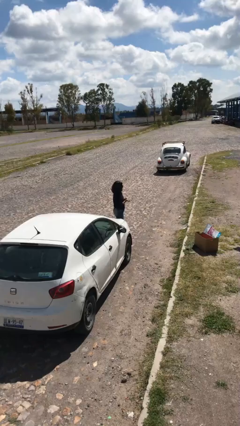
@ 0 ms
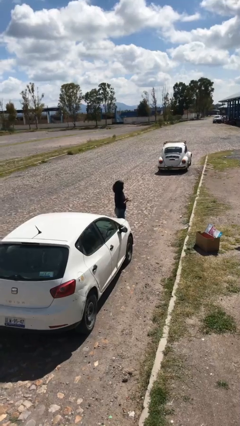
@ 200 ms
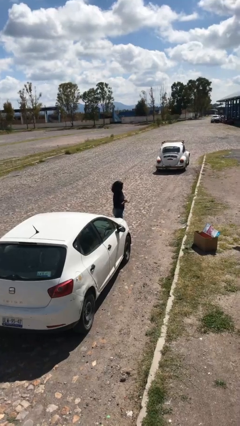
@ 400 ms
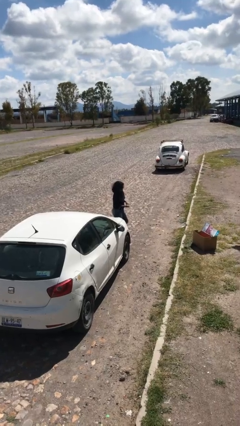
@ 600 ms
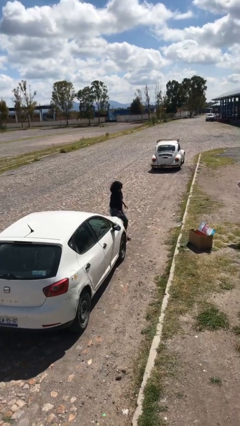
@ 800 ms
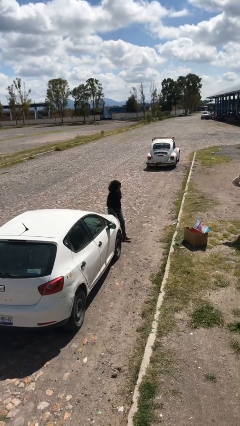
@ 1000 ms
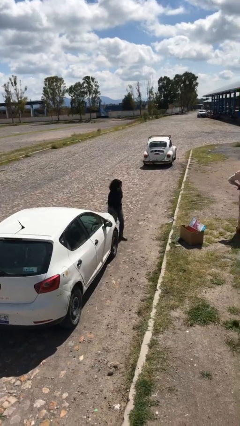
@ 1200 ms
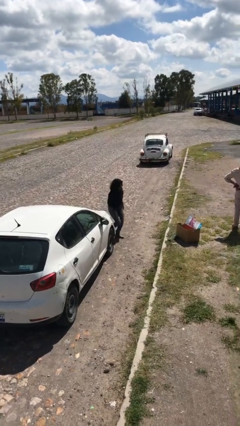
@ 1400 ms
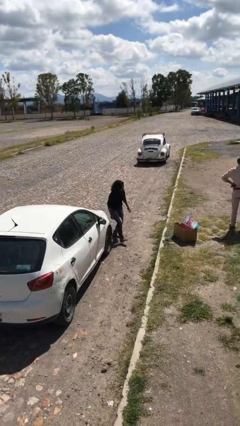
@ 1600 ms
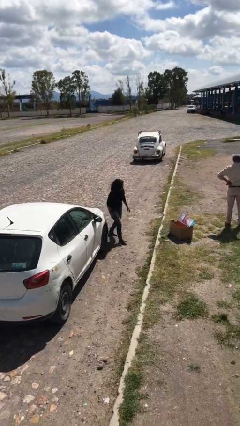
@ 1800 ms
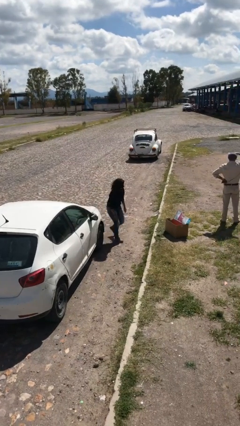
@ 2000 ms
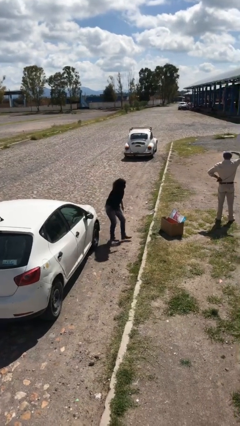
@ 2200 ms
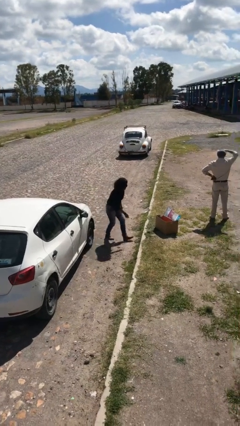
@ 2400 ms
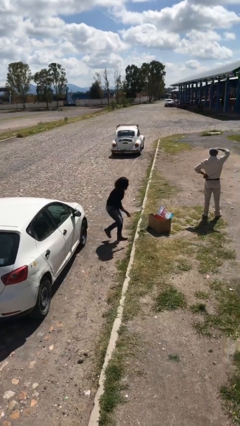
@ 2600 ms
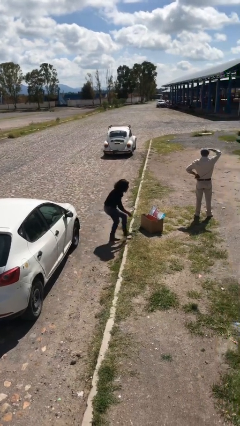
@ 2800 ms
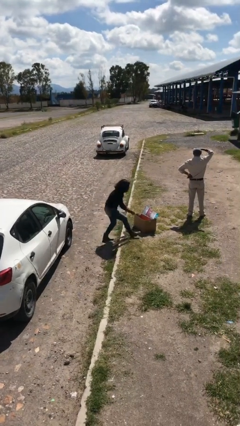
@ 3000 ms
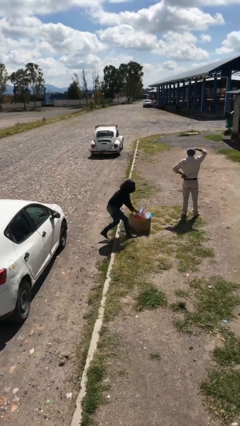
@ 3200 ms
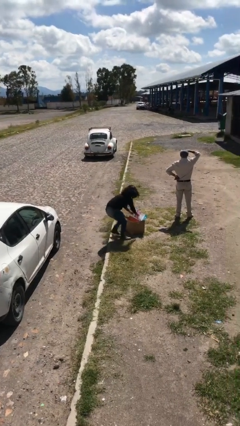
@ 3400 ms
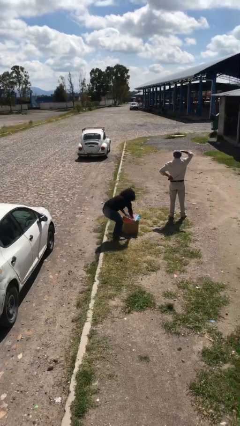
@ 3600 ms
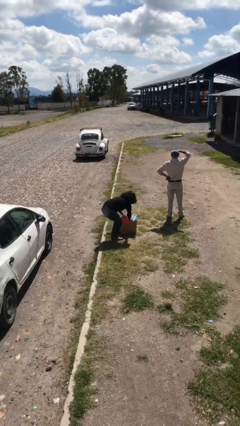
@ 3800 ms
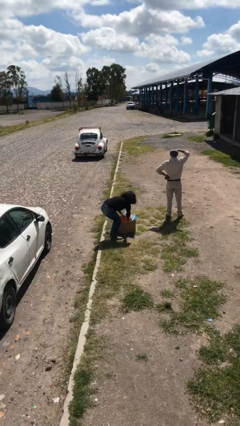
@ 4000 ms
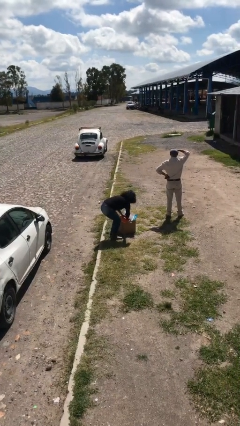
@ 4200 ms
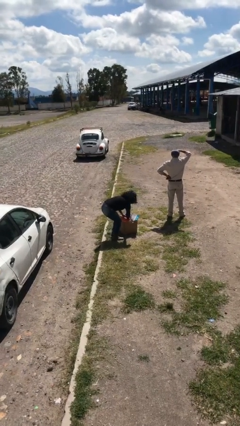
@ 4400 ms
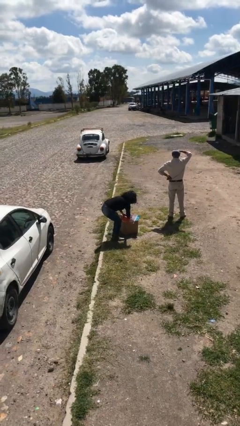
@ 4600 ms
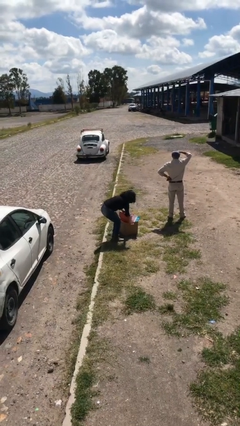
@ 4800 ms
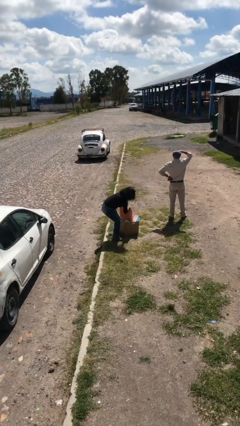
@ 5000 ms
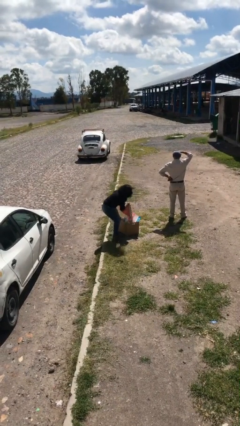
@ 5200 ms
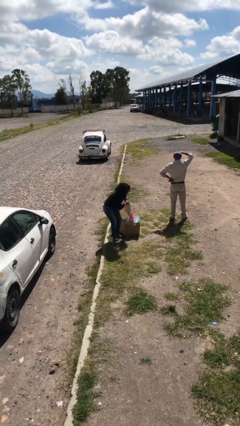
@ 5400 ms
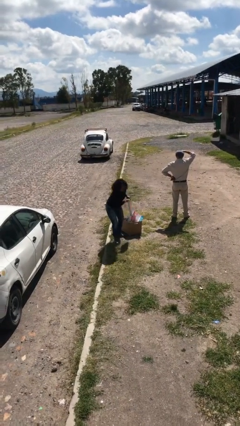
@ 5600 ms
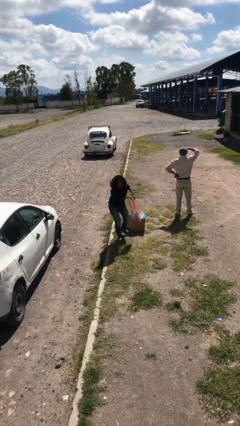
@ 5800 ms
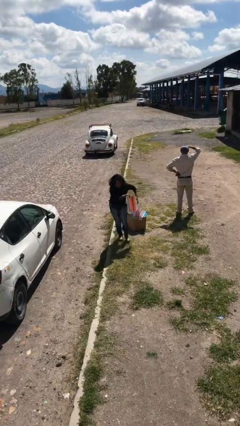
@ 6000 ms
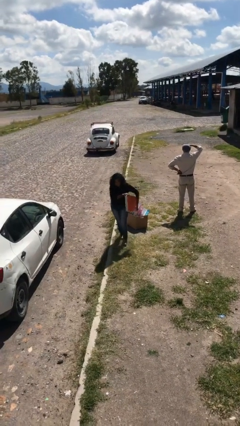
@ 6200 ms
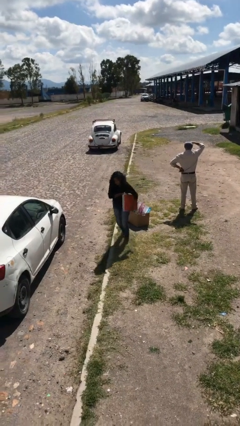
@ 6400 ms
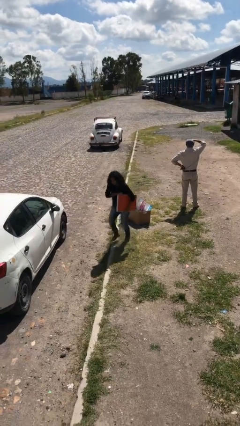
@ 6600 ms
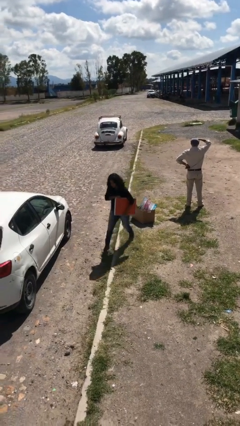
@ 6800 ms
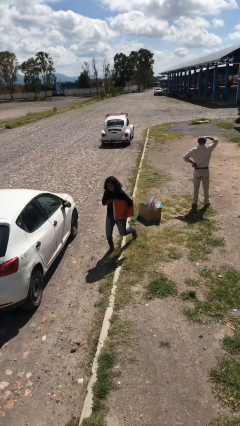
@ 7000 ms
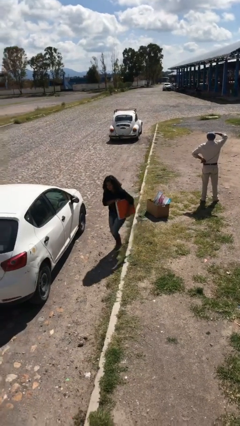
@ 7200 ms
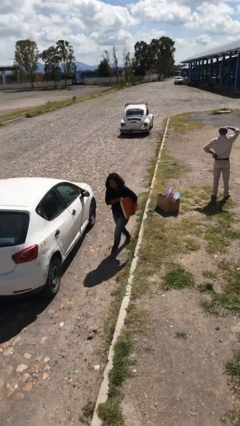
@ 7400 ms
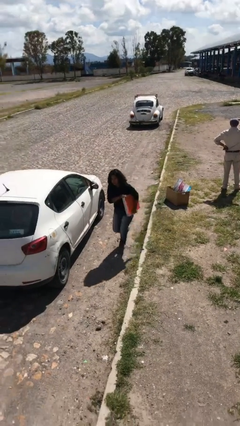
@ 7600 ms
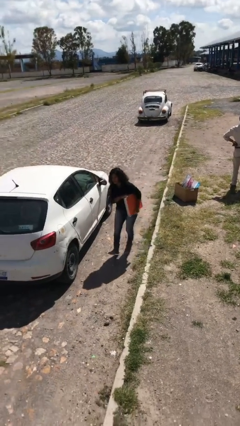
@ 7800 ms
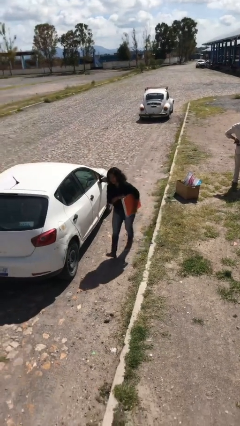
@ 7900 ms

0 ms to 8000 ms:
person steals object from person

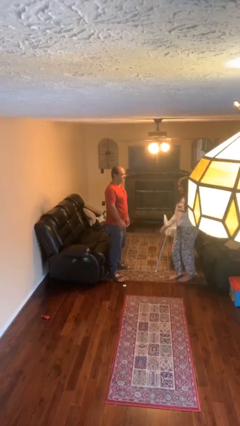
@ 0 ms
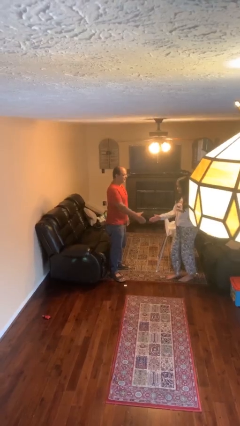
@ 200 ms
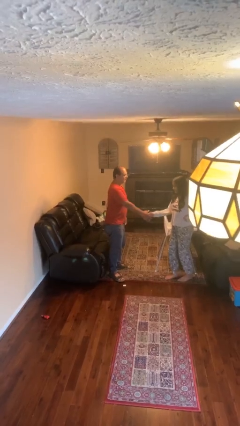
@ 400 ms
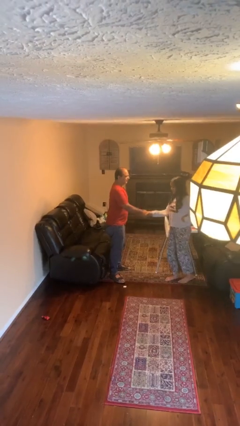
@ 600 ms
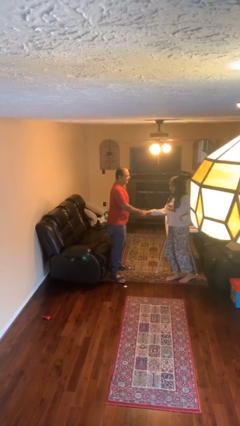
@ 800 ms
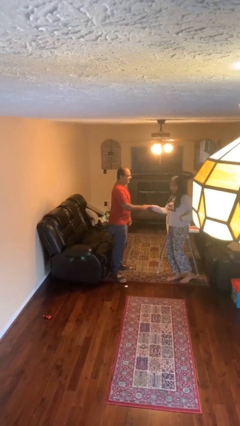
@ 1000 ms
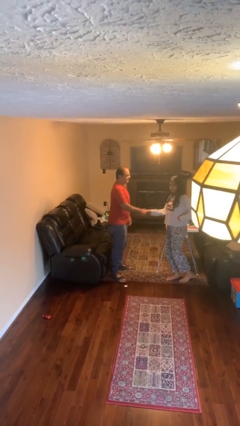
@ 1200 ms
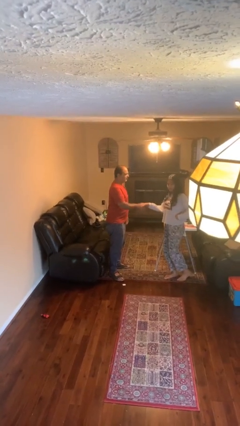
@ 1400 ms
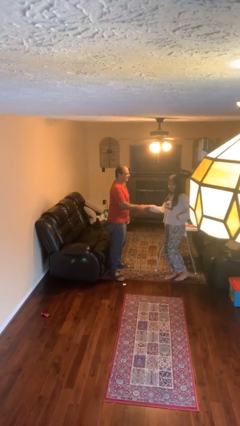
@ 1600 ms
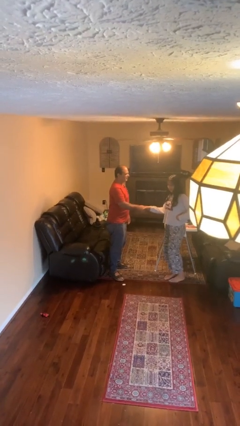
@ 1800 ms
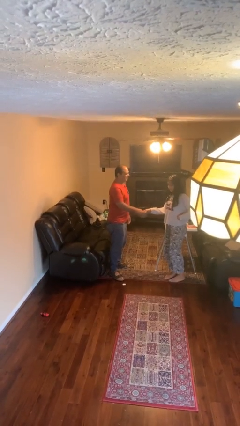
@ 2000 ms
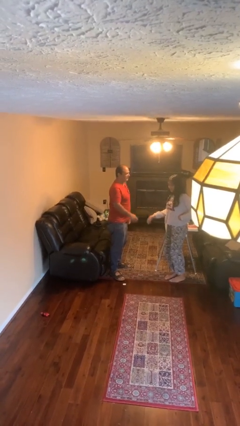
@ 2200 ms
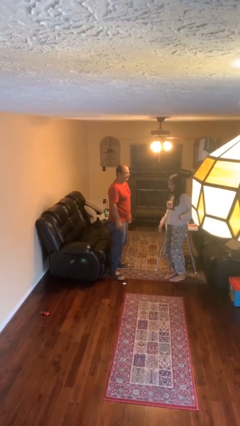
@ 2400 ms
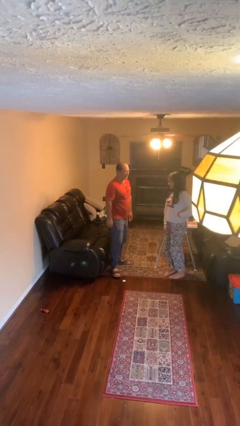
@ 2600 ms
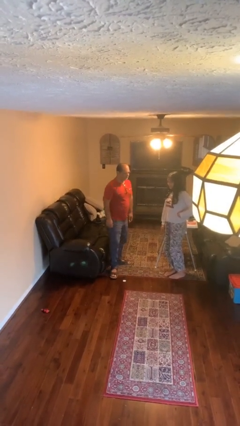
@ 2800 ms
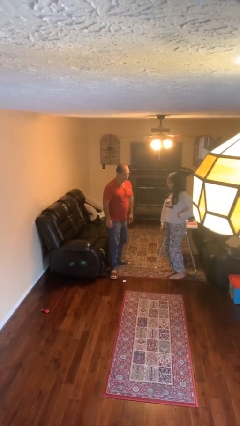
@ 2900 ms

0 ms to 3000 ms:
person shakes hand

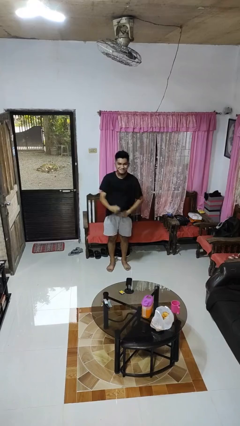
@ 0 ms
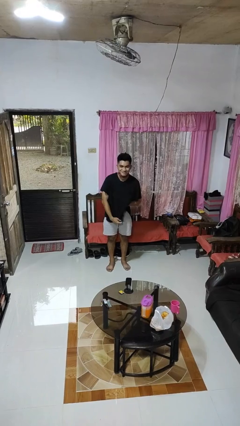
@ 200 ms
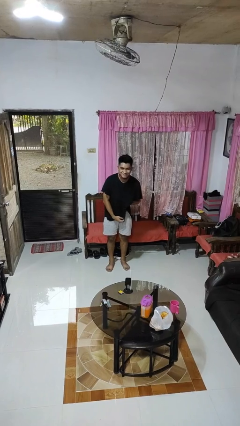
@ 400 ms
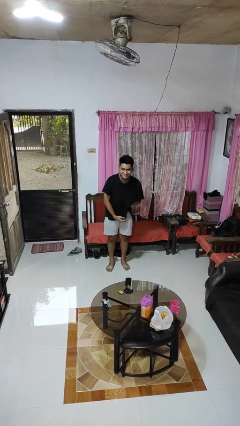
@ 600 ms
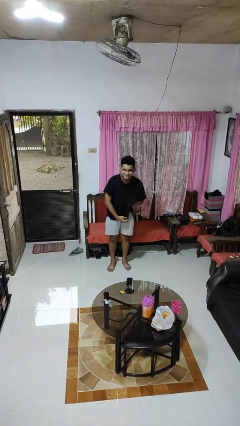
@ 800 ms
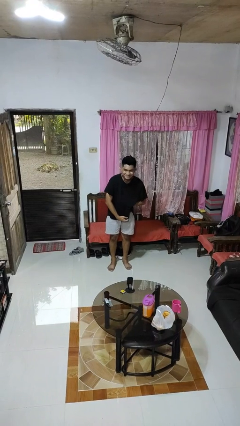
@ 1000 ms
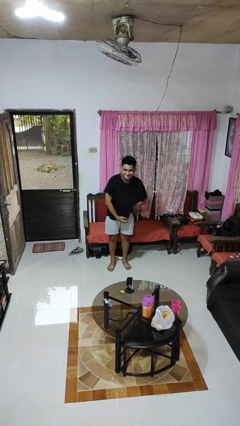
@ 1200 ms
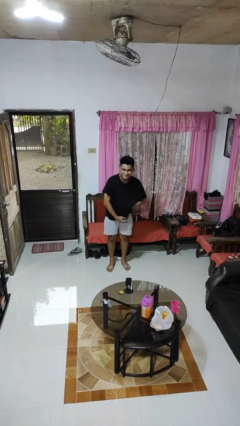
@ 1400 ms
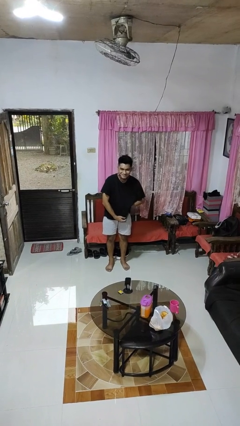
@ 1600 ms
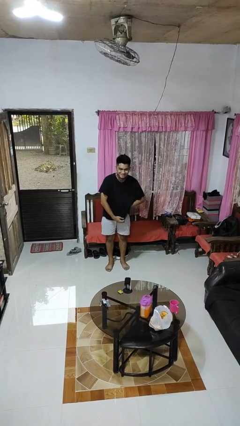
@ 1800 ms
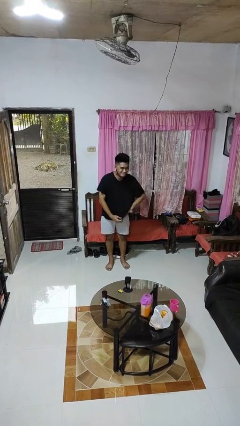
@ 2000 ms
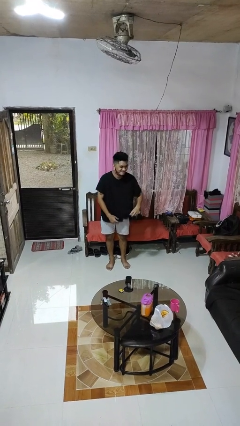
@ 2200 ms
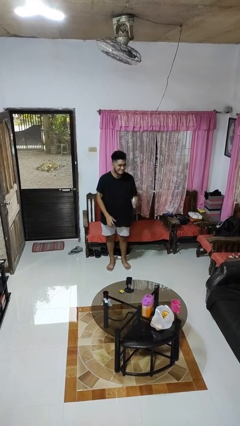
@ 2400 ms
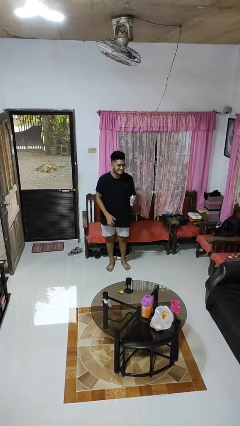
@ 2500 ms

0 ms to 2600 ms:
person applies deodorant

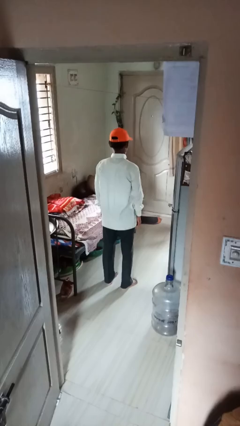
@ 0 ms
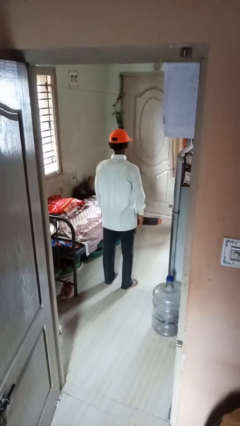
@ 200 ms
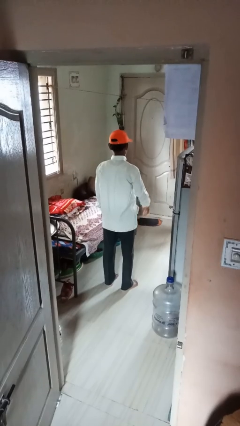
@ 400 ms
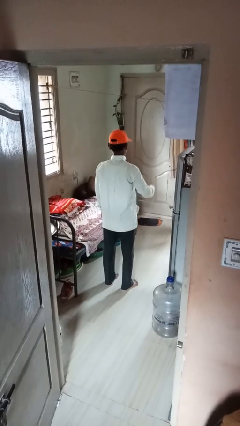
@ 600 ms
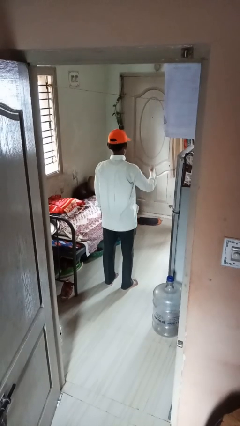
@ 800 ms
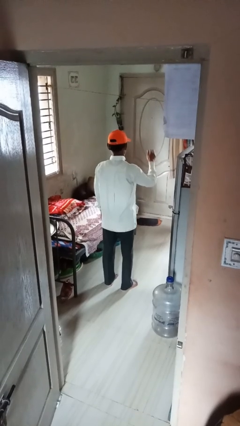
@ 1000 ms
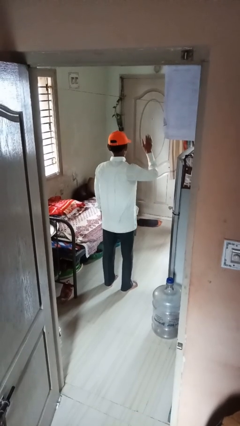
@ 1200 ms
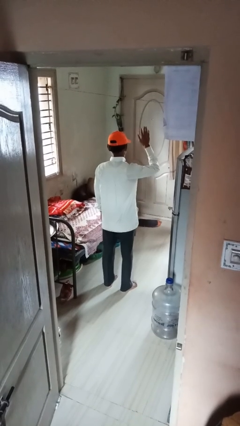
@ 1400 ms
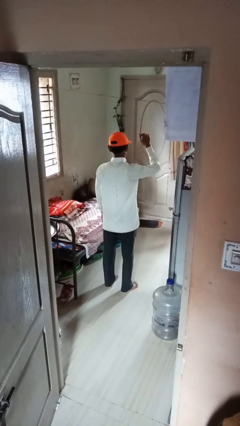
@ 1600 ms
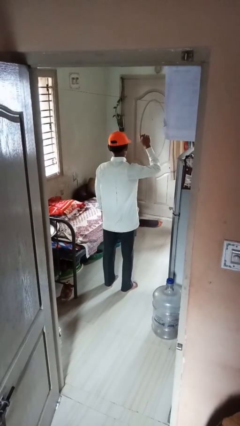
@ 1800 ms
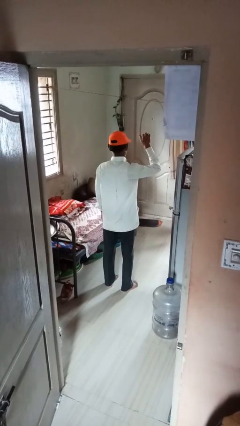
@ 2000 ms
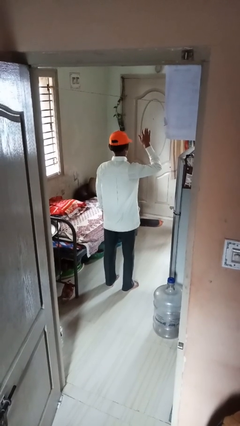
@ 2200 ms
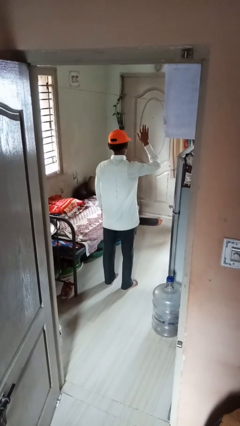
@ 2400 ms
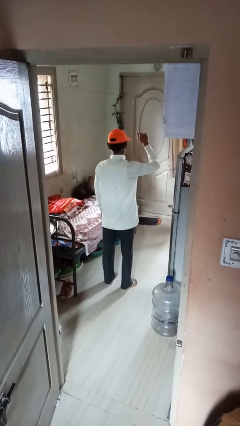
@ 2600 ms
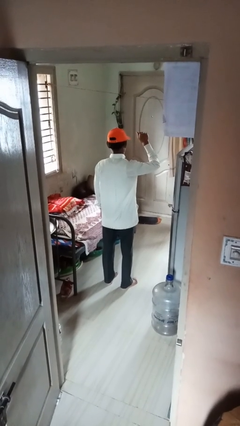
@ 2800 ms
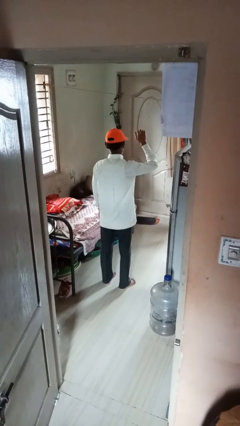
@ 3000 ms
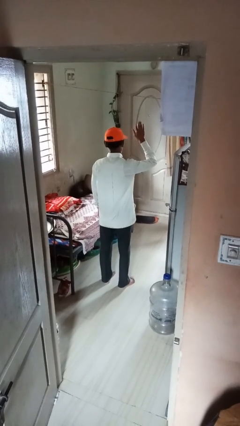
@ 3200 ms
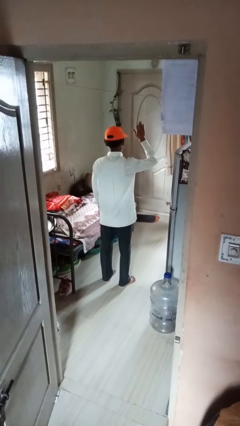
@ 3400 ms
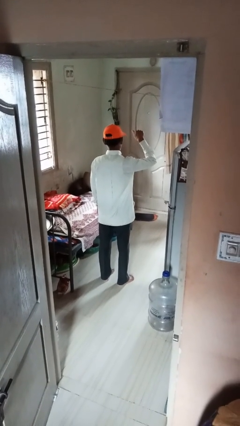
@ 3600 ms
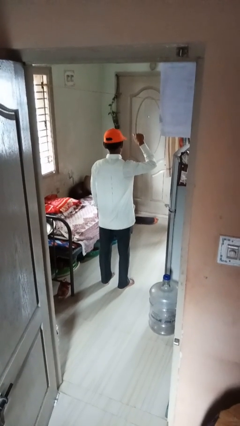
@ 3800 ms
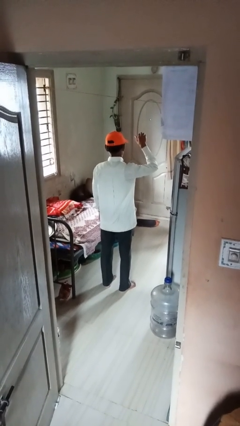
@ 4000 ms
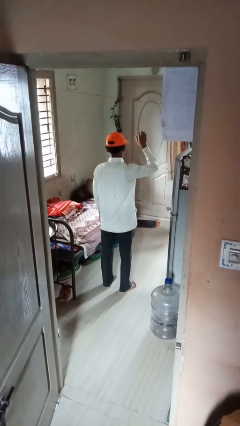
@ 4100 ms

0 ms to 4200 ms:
person gestures come here
